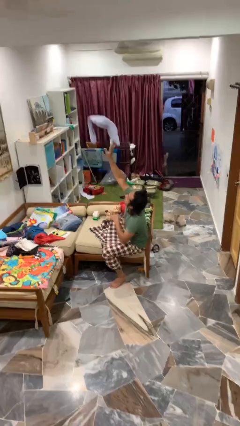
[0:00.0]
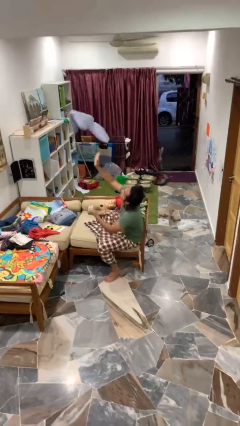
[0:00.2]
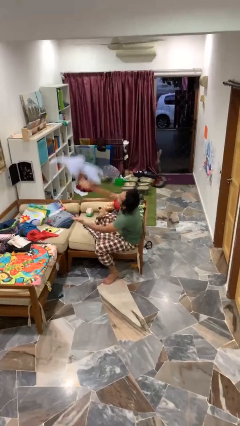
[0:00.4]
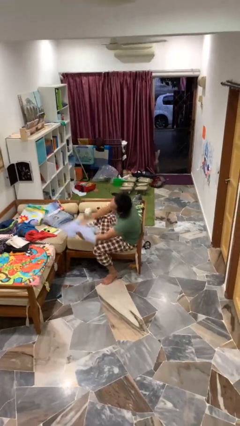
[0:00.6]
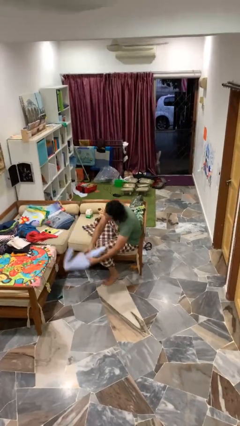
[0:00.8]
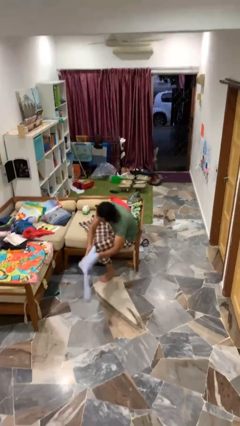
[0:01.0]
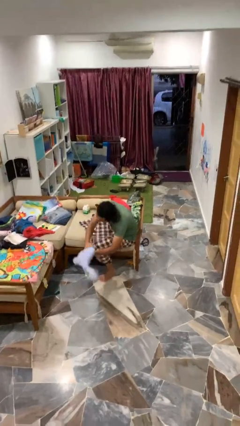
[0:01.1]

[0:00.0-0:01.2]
person drops object

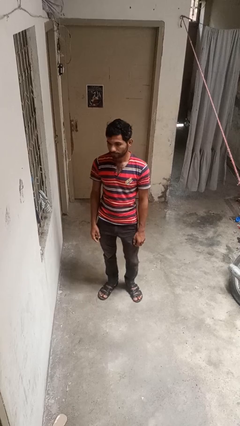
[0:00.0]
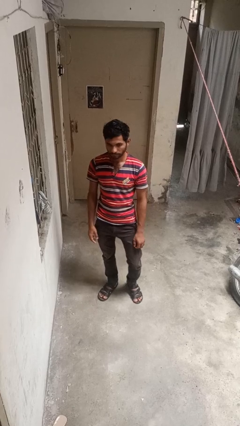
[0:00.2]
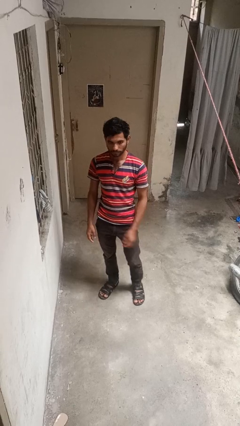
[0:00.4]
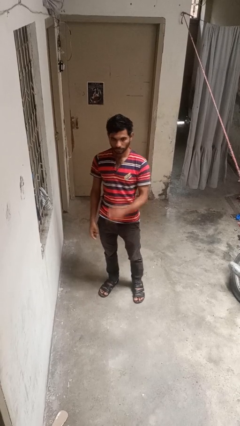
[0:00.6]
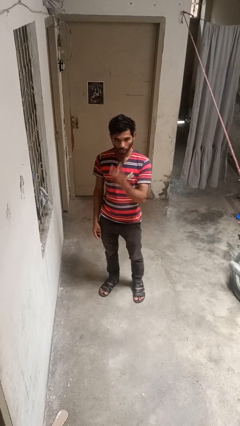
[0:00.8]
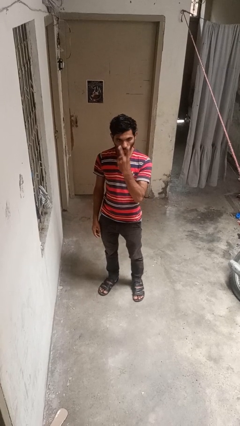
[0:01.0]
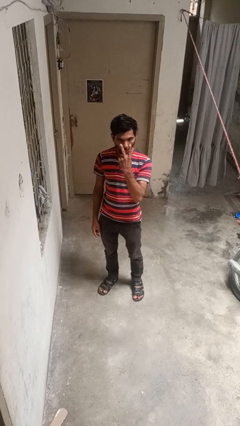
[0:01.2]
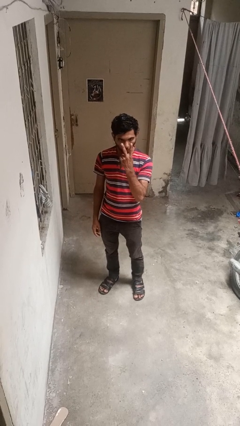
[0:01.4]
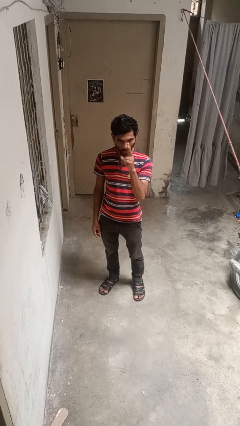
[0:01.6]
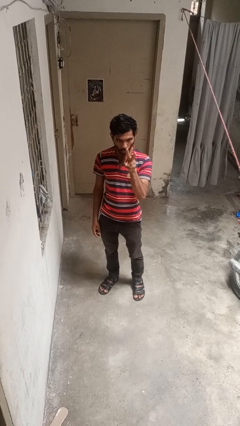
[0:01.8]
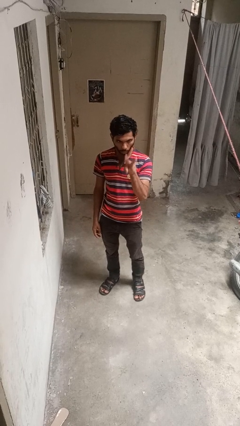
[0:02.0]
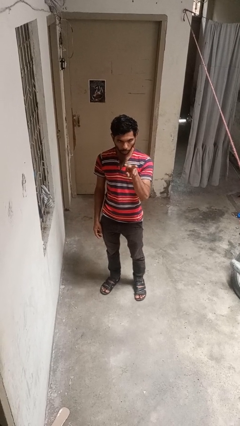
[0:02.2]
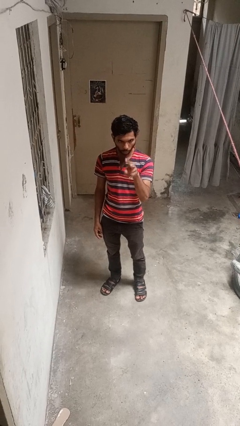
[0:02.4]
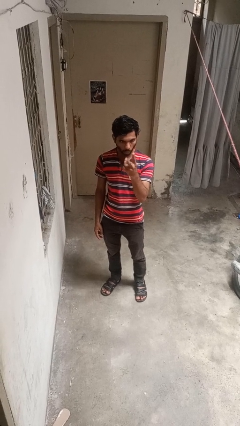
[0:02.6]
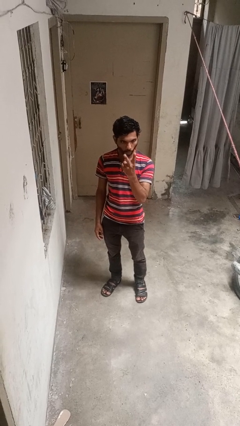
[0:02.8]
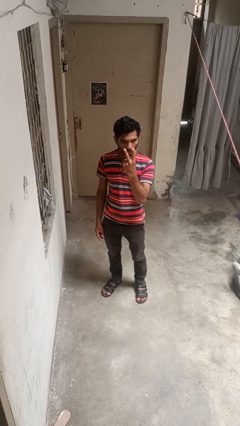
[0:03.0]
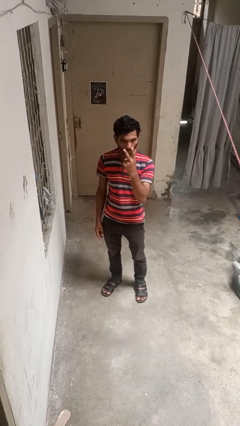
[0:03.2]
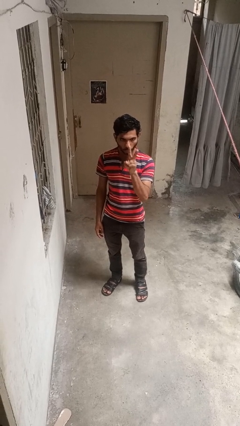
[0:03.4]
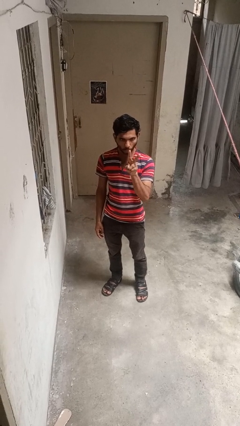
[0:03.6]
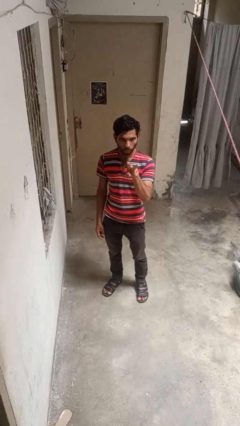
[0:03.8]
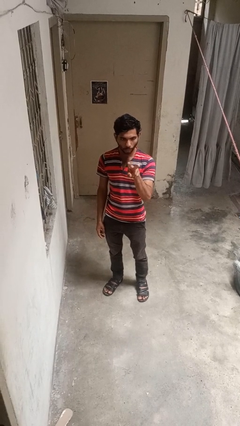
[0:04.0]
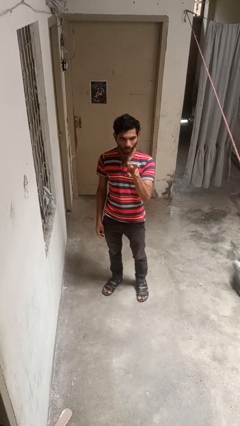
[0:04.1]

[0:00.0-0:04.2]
person gestures watch closely

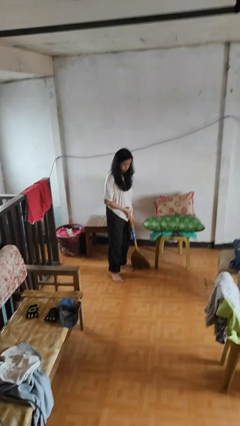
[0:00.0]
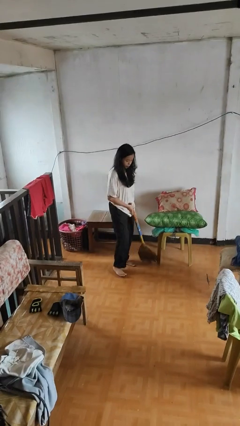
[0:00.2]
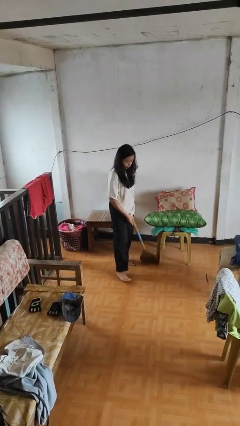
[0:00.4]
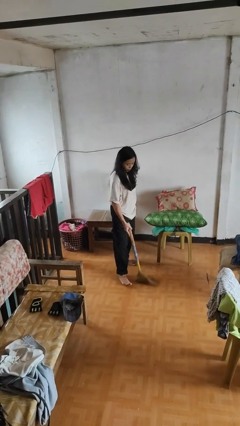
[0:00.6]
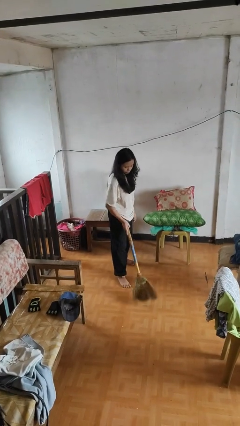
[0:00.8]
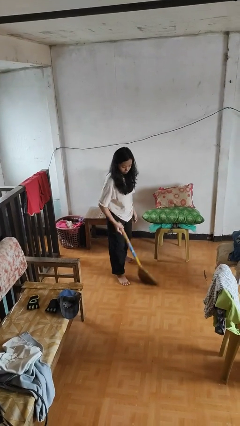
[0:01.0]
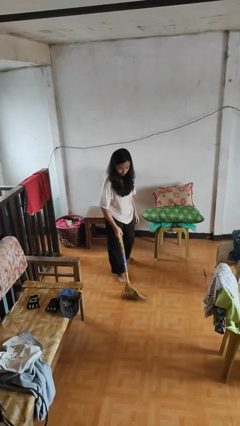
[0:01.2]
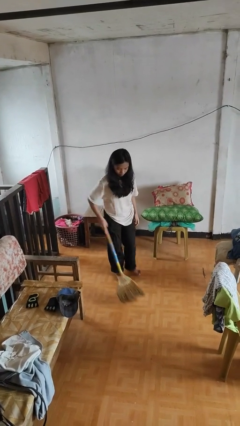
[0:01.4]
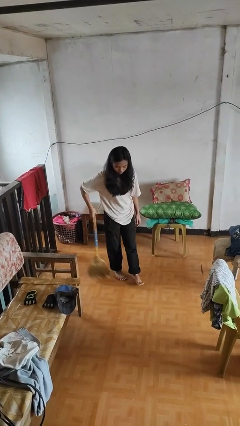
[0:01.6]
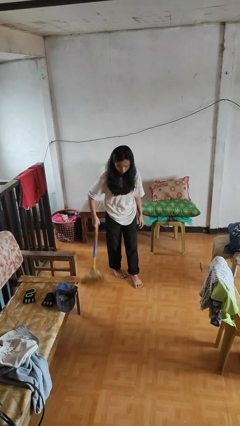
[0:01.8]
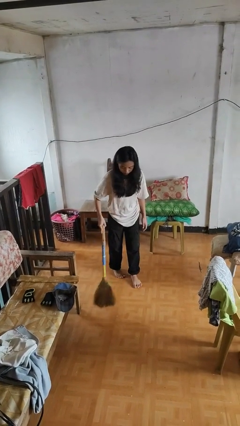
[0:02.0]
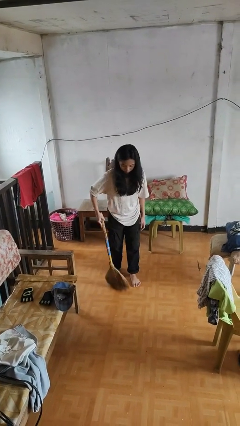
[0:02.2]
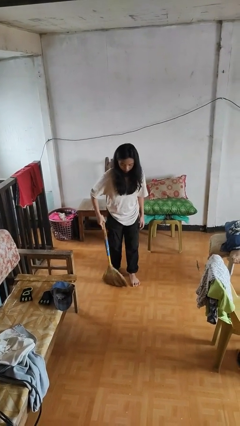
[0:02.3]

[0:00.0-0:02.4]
person sweeps floor

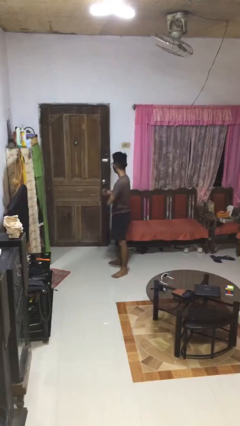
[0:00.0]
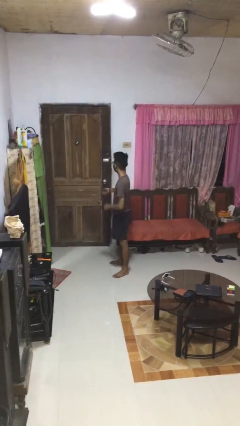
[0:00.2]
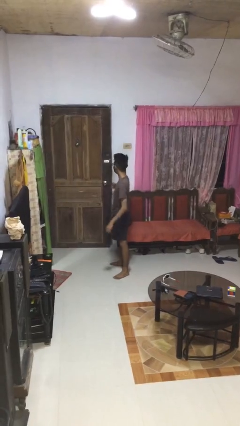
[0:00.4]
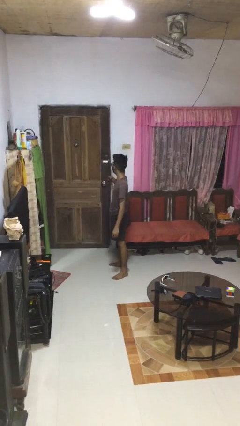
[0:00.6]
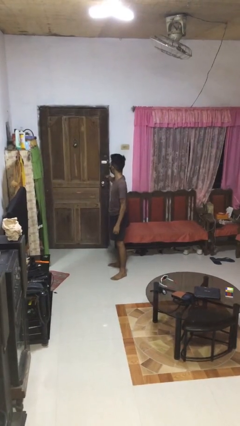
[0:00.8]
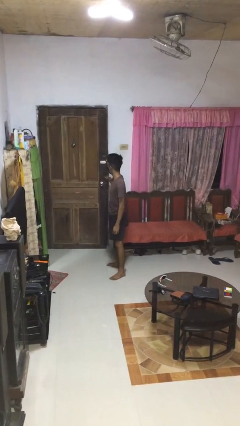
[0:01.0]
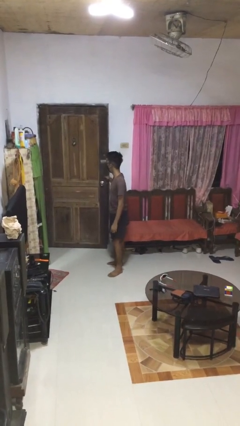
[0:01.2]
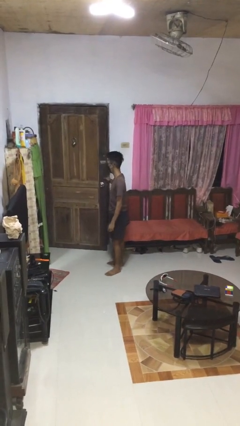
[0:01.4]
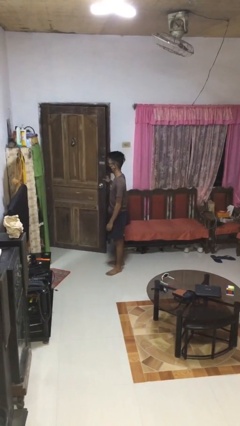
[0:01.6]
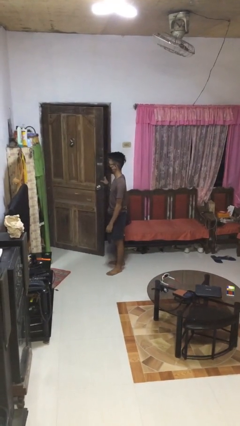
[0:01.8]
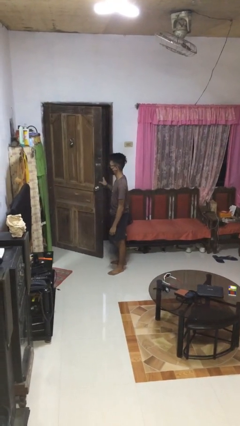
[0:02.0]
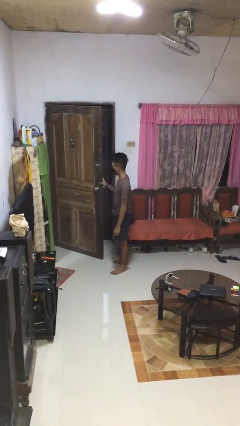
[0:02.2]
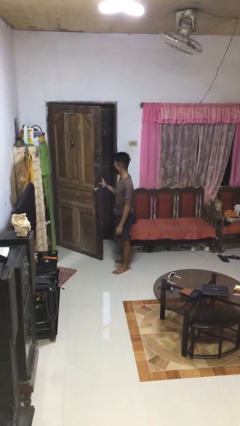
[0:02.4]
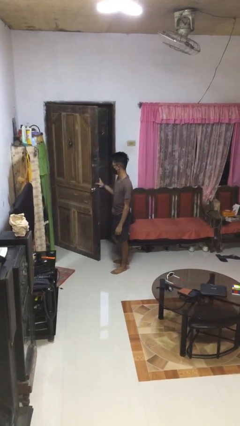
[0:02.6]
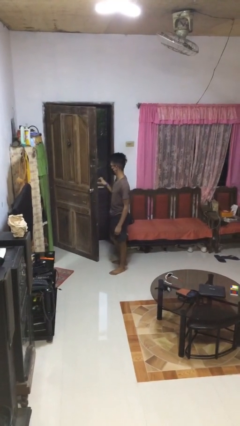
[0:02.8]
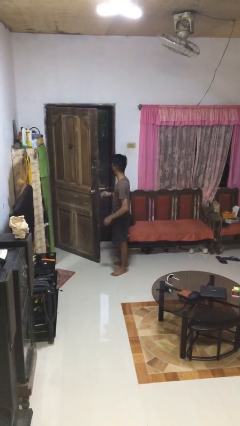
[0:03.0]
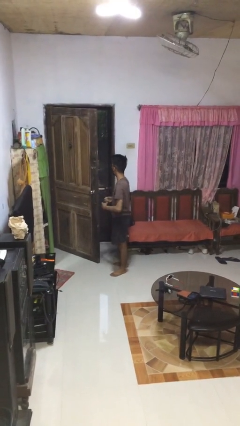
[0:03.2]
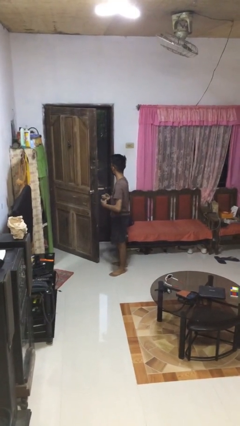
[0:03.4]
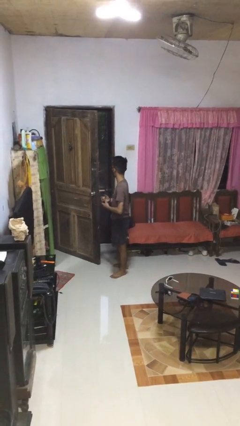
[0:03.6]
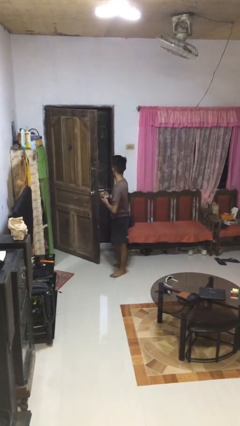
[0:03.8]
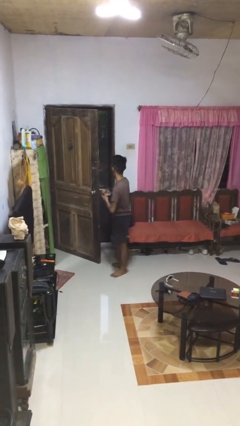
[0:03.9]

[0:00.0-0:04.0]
person opens facility door

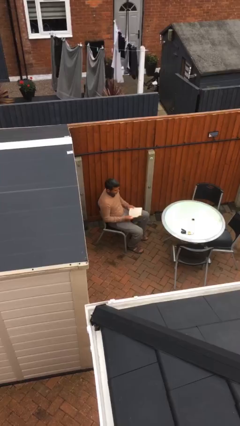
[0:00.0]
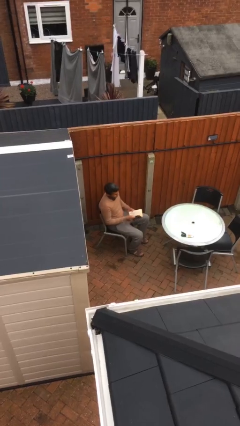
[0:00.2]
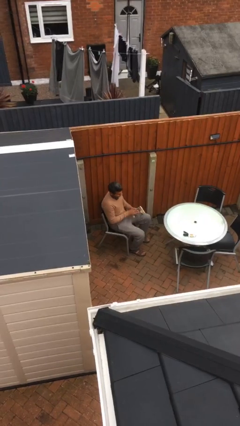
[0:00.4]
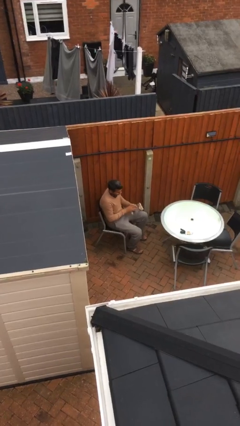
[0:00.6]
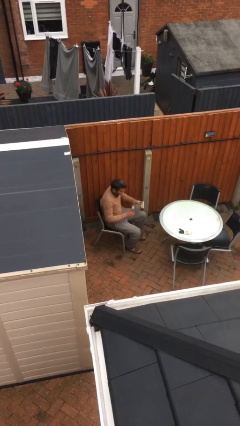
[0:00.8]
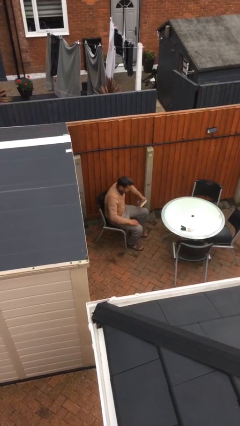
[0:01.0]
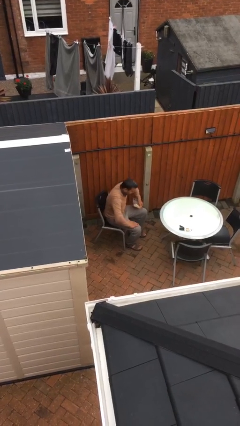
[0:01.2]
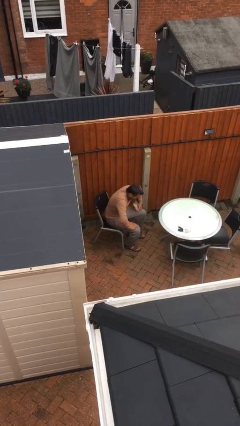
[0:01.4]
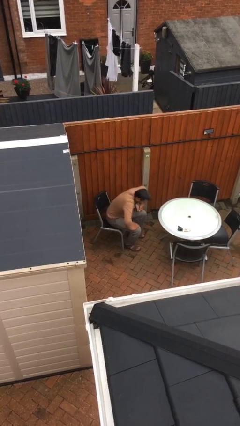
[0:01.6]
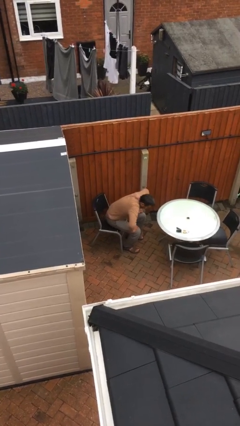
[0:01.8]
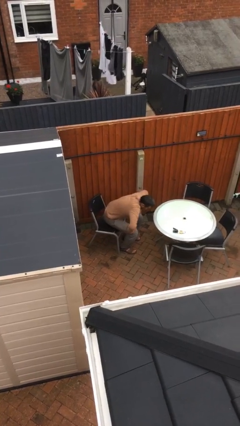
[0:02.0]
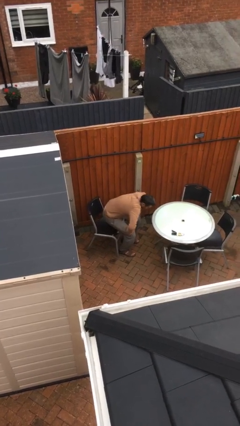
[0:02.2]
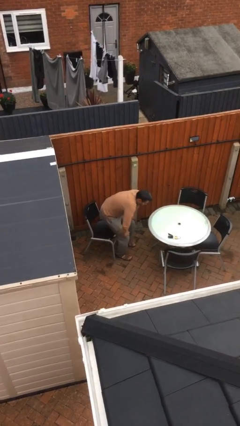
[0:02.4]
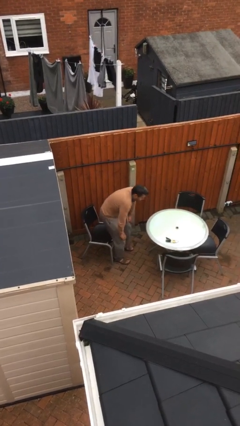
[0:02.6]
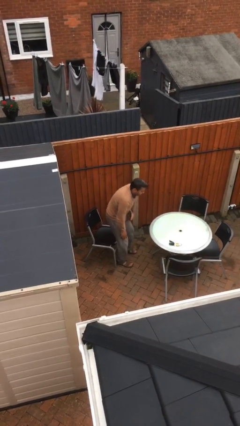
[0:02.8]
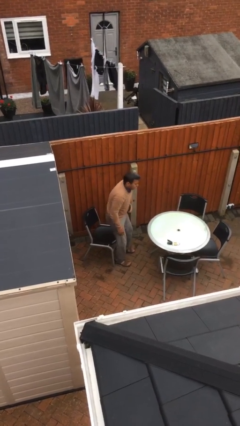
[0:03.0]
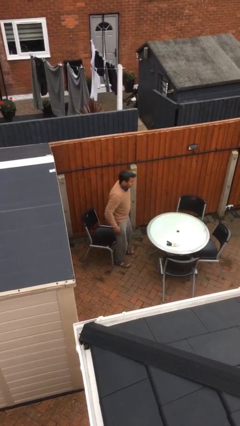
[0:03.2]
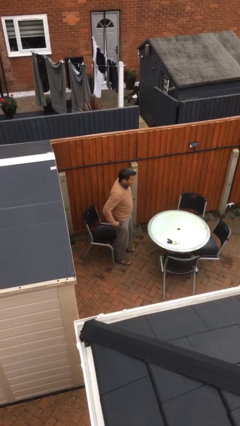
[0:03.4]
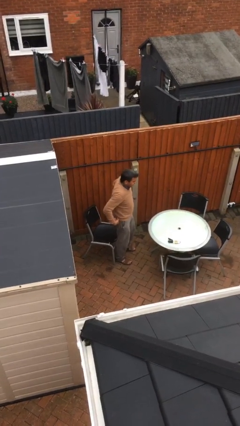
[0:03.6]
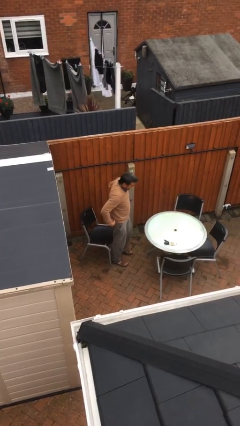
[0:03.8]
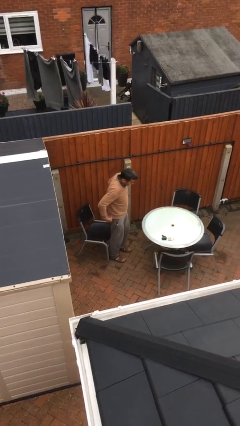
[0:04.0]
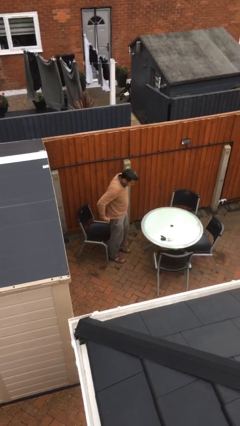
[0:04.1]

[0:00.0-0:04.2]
person stands up

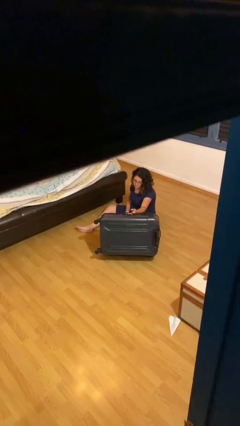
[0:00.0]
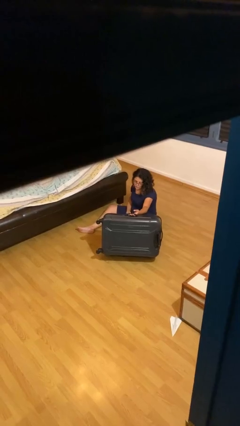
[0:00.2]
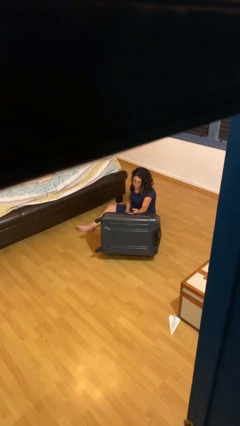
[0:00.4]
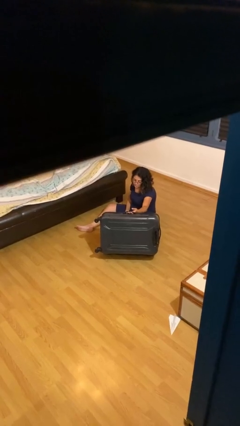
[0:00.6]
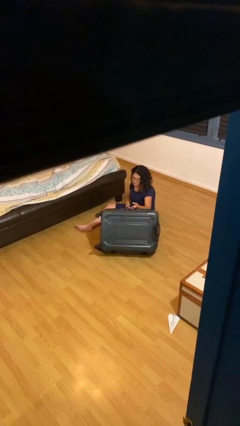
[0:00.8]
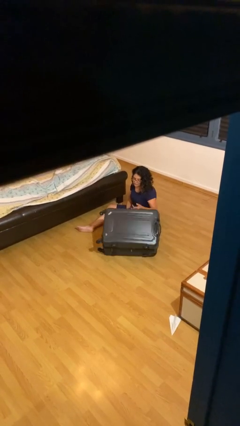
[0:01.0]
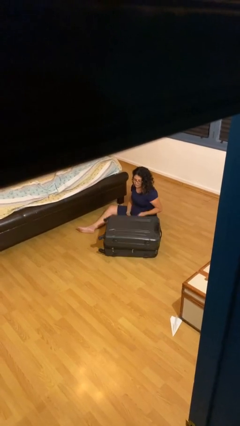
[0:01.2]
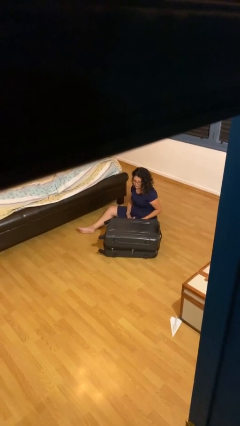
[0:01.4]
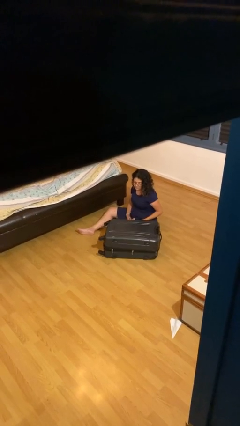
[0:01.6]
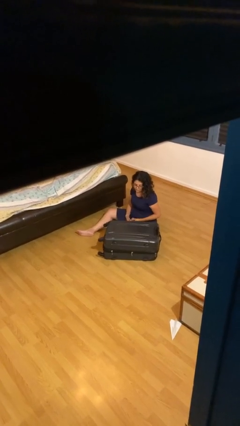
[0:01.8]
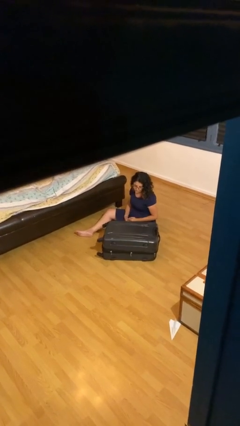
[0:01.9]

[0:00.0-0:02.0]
person closes suitcase
